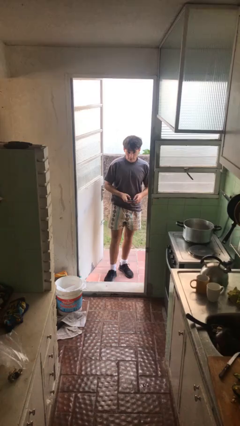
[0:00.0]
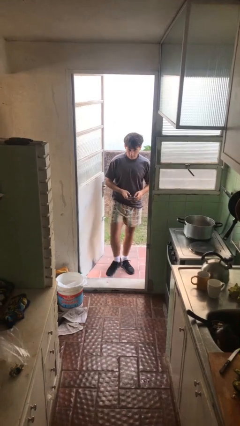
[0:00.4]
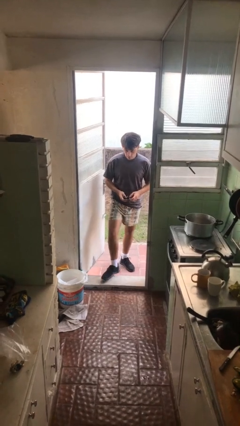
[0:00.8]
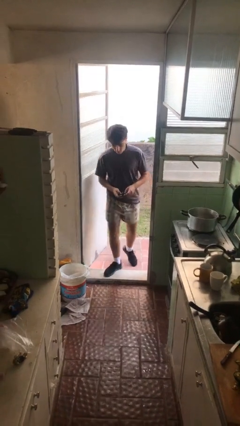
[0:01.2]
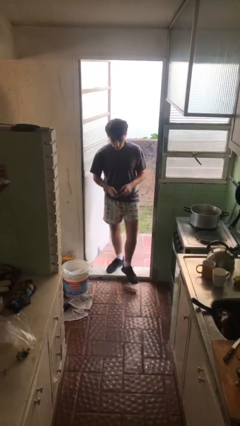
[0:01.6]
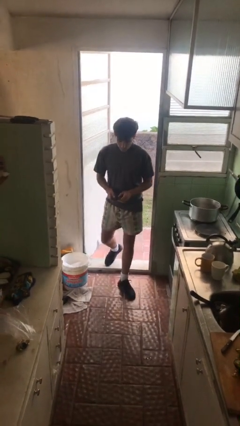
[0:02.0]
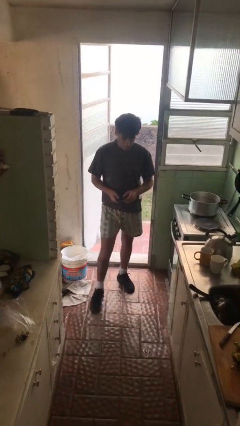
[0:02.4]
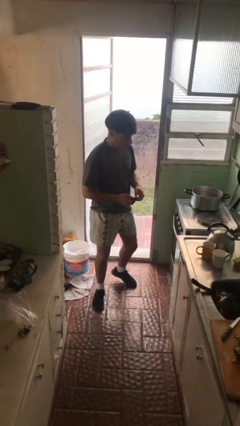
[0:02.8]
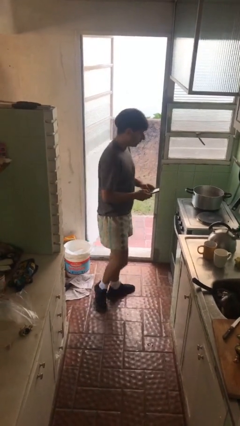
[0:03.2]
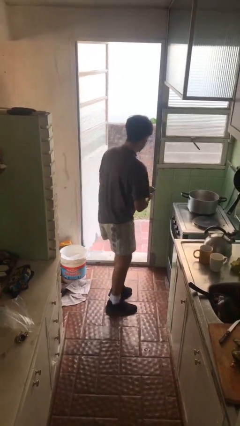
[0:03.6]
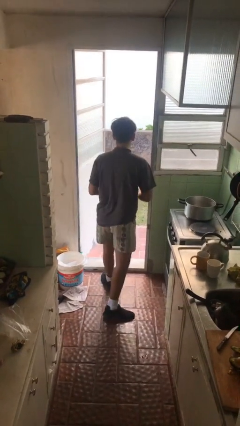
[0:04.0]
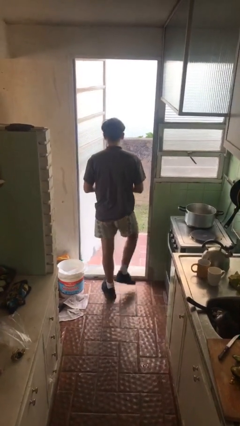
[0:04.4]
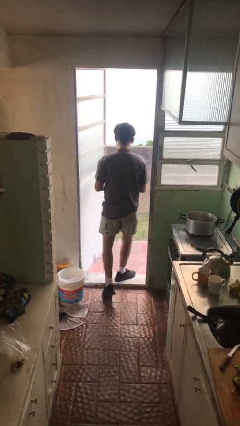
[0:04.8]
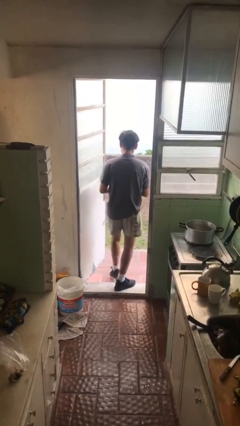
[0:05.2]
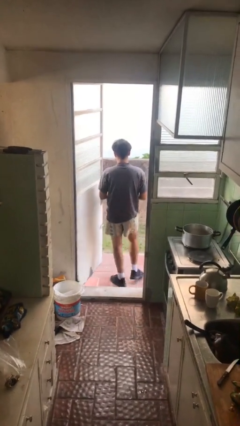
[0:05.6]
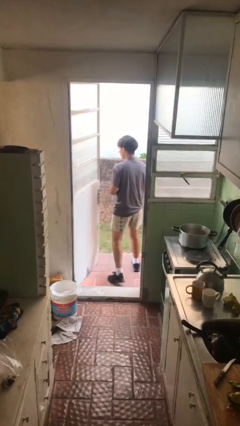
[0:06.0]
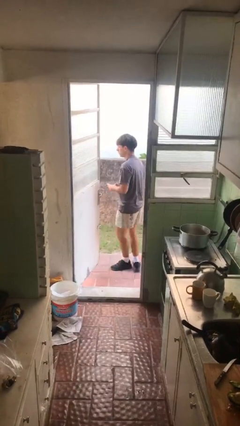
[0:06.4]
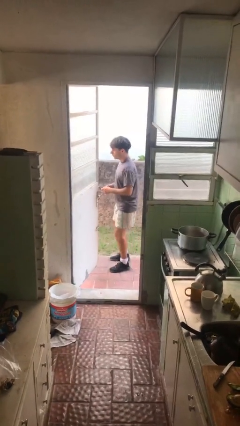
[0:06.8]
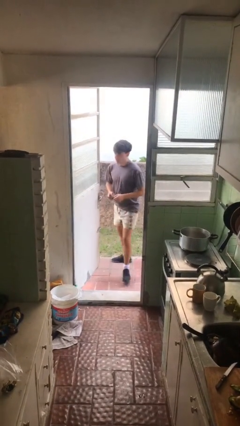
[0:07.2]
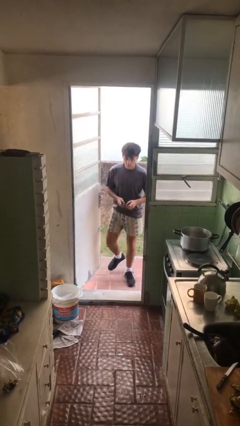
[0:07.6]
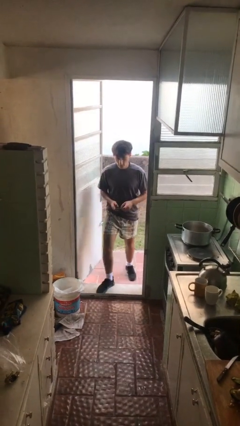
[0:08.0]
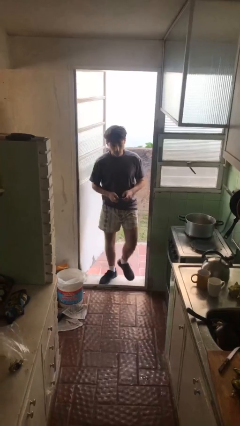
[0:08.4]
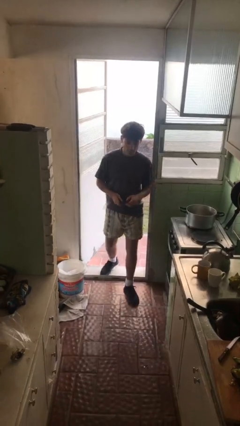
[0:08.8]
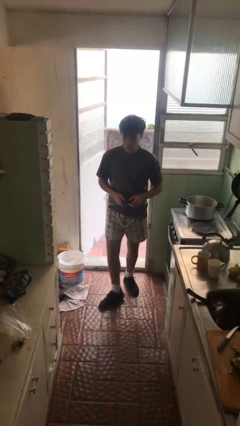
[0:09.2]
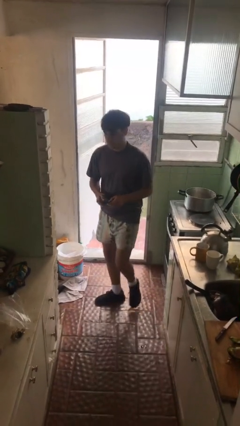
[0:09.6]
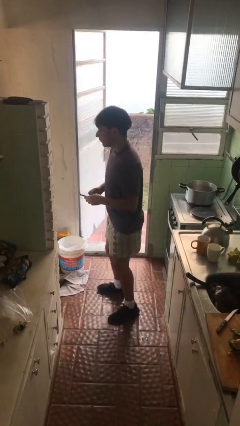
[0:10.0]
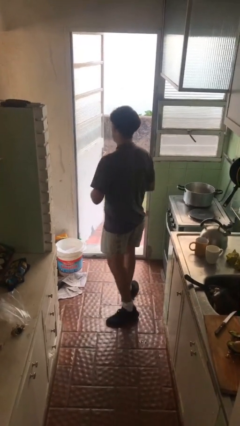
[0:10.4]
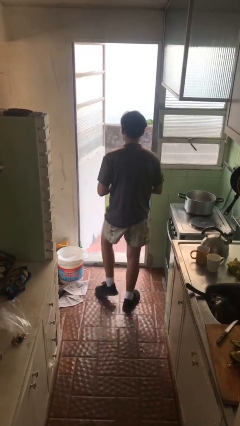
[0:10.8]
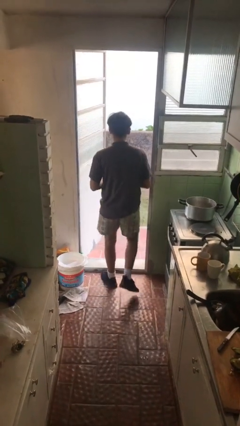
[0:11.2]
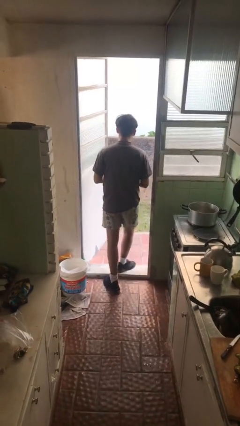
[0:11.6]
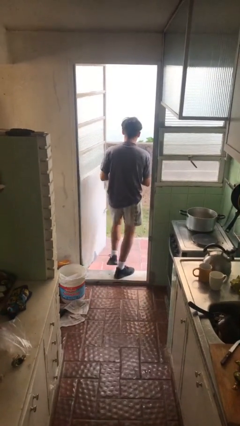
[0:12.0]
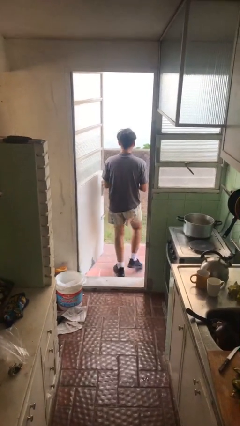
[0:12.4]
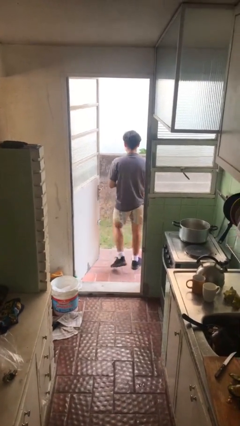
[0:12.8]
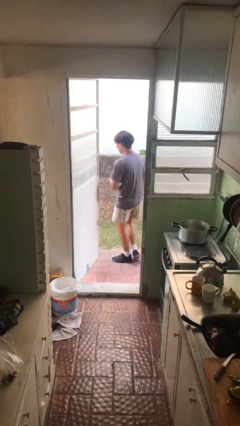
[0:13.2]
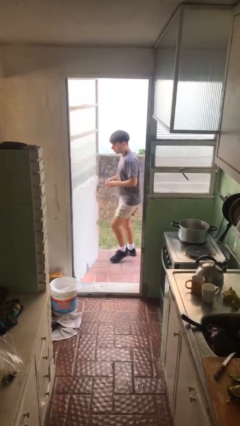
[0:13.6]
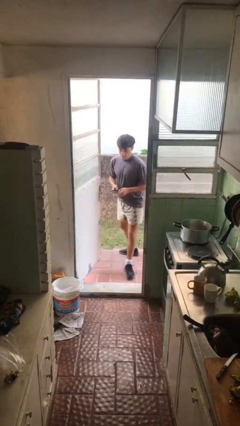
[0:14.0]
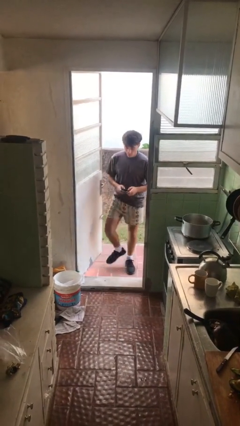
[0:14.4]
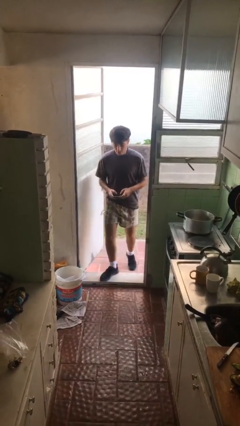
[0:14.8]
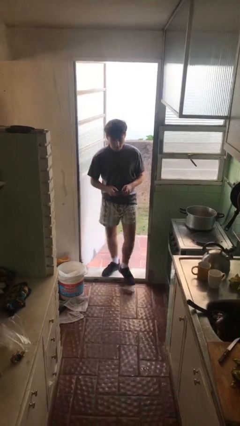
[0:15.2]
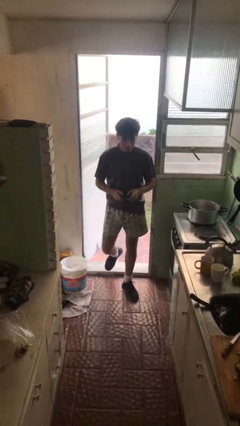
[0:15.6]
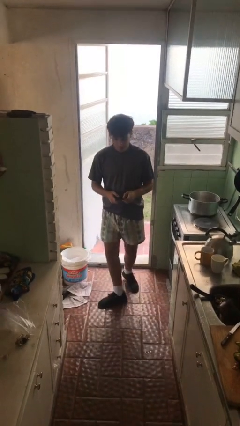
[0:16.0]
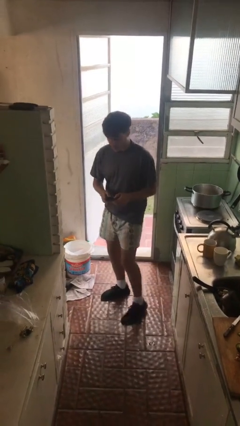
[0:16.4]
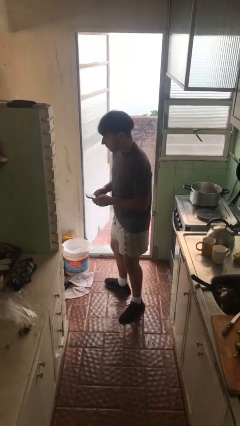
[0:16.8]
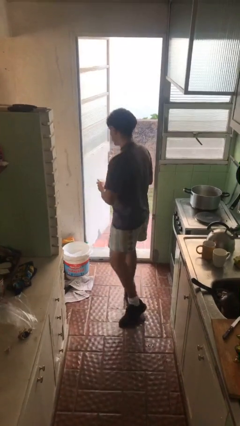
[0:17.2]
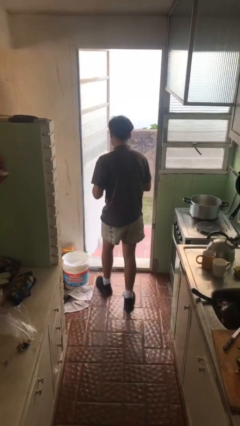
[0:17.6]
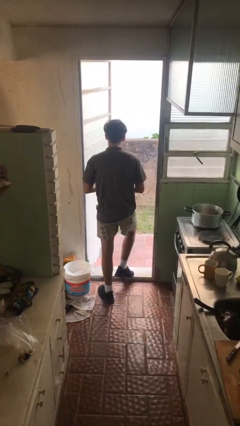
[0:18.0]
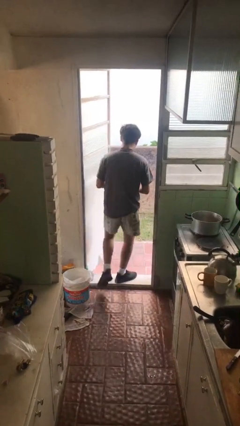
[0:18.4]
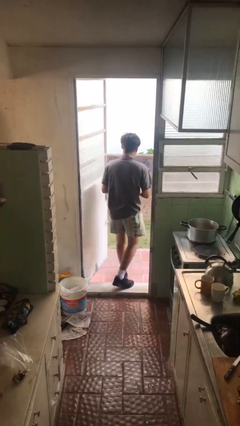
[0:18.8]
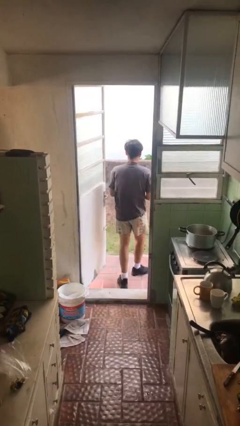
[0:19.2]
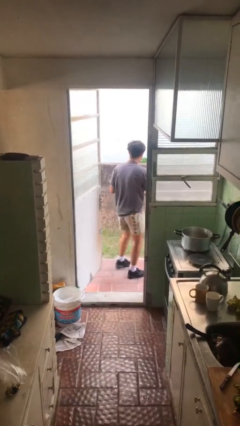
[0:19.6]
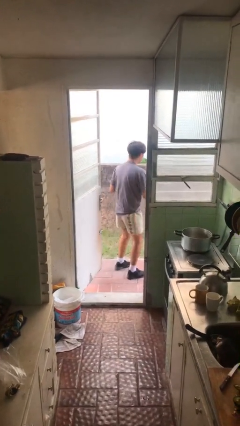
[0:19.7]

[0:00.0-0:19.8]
person texts on phone

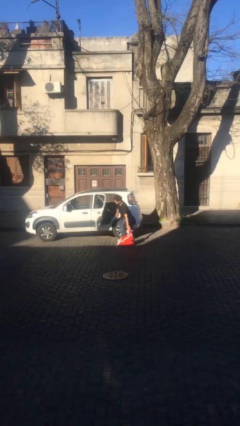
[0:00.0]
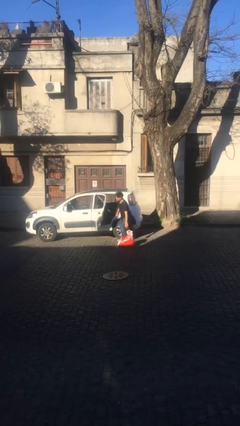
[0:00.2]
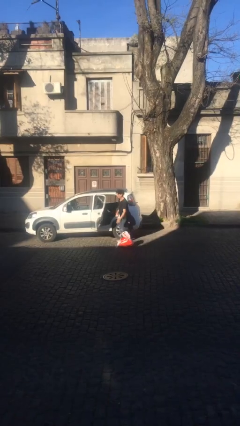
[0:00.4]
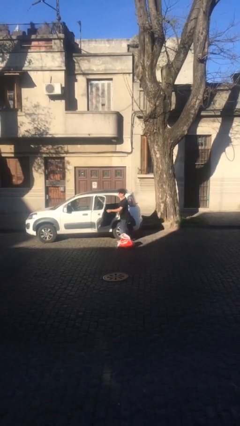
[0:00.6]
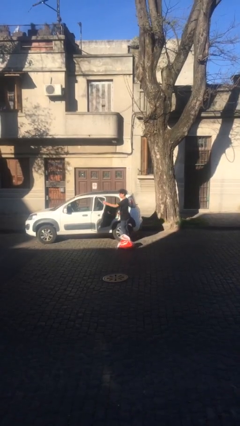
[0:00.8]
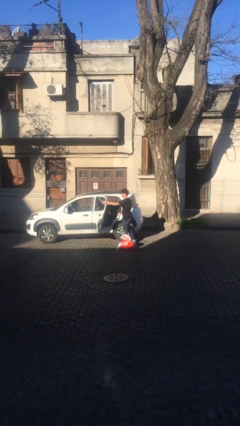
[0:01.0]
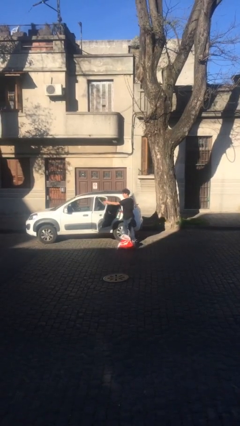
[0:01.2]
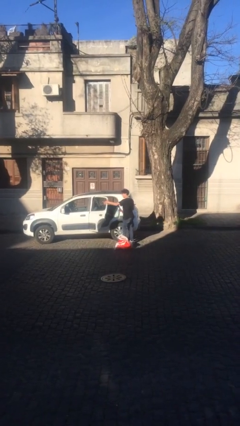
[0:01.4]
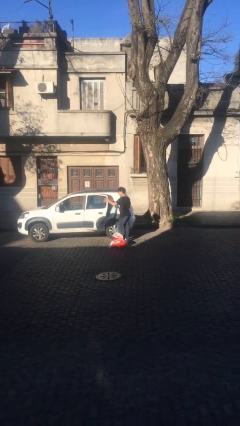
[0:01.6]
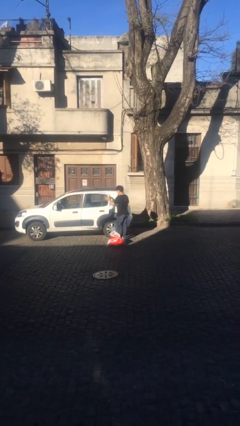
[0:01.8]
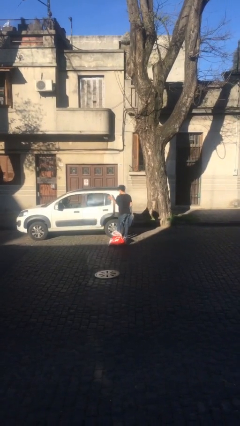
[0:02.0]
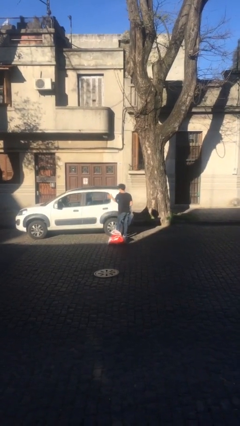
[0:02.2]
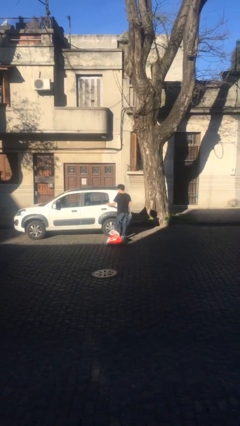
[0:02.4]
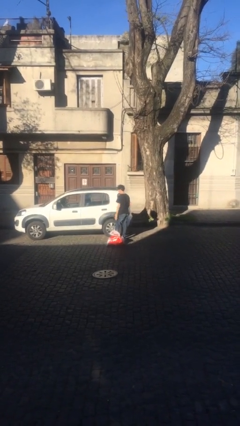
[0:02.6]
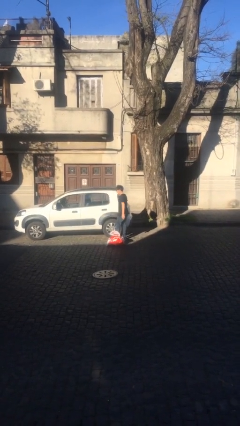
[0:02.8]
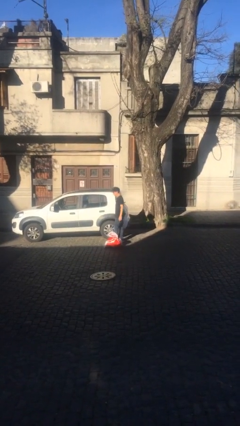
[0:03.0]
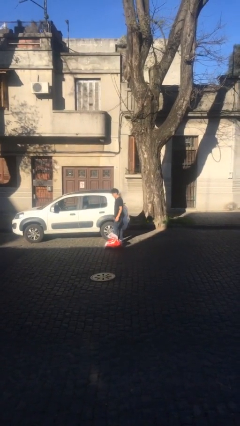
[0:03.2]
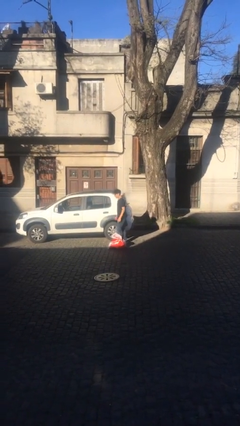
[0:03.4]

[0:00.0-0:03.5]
person closes car door

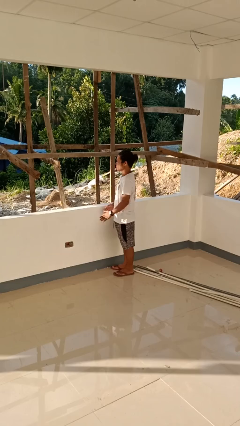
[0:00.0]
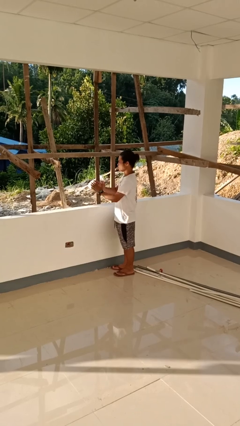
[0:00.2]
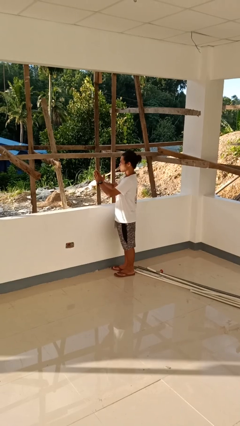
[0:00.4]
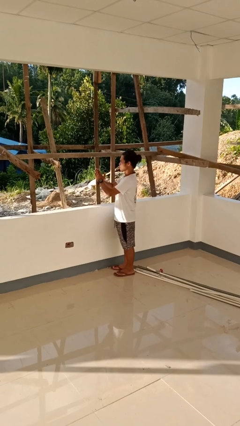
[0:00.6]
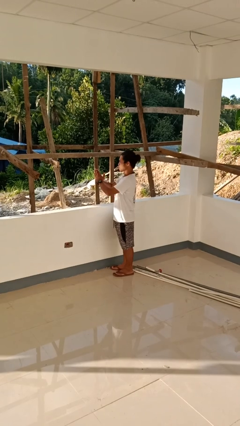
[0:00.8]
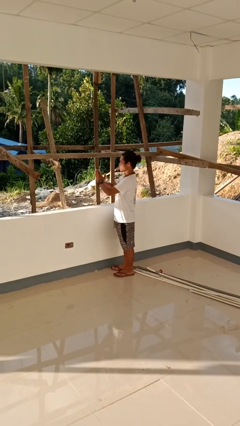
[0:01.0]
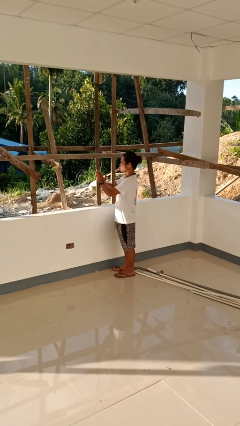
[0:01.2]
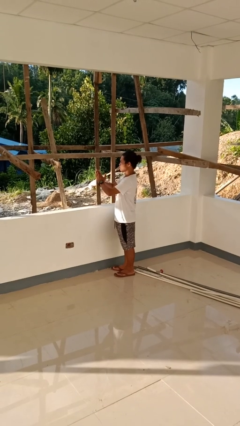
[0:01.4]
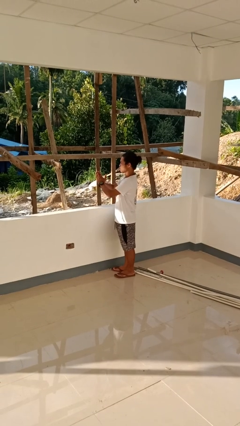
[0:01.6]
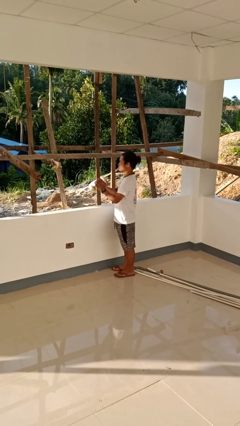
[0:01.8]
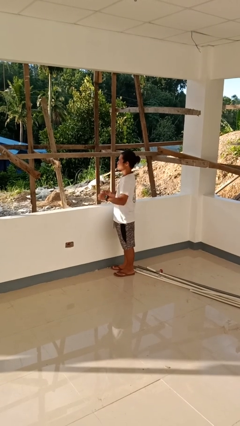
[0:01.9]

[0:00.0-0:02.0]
person prays

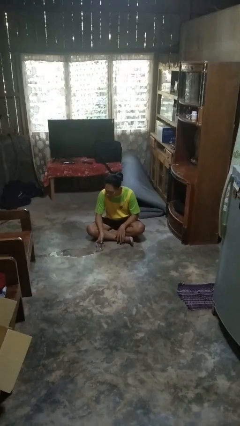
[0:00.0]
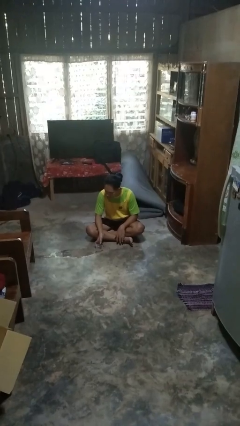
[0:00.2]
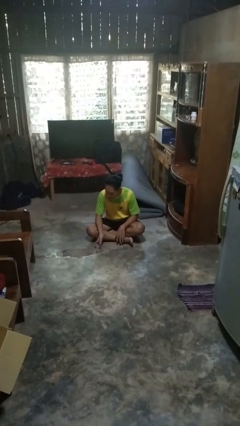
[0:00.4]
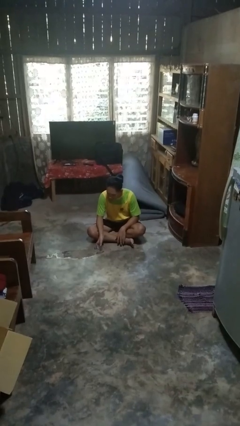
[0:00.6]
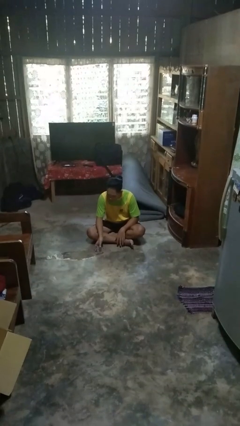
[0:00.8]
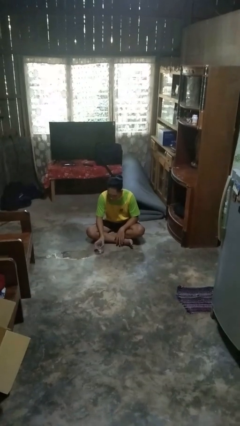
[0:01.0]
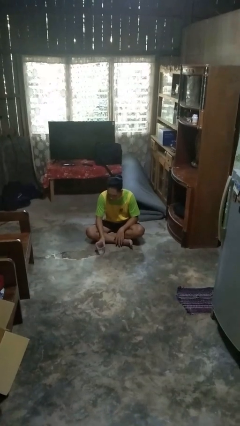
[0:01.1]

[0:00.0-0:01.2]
person sets upright glass

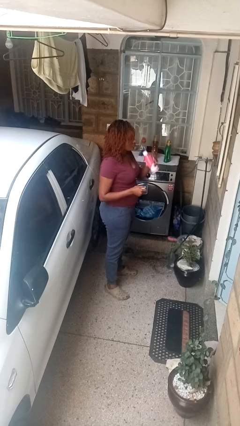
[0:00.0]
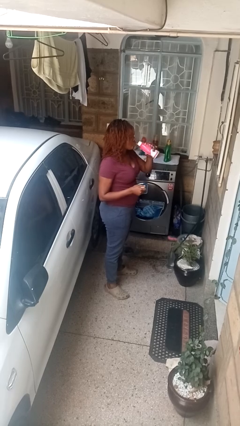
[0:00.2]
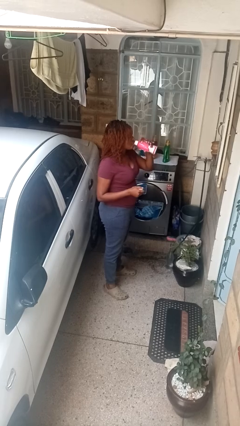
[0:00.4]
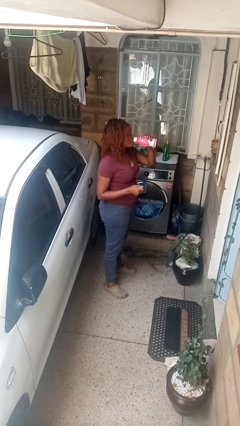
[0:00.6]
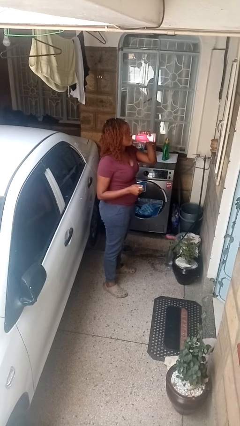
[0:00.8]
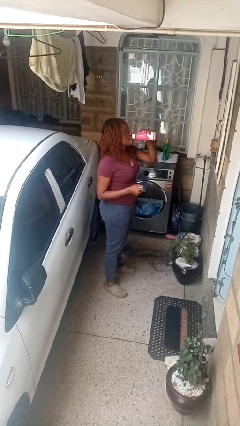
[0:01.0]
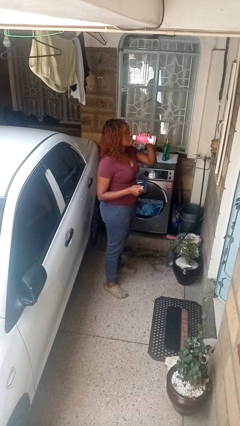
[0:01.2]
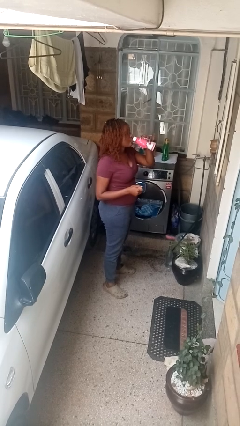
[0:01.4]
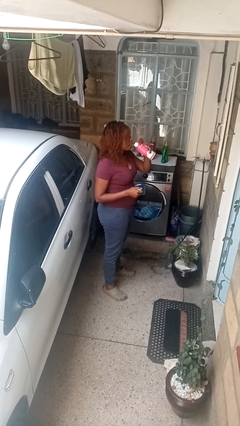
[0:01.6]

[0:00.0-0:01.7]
person drinks from beverage can
